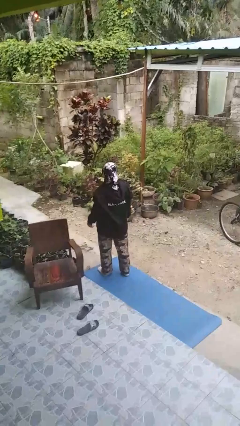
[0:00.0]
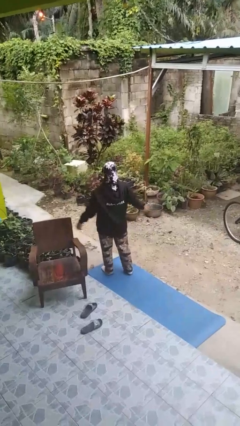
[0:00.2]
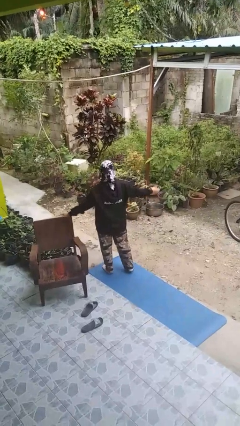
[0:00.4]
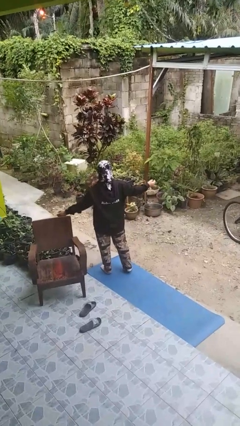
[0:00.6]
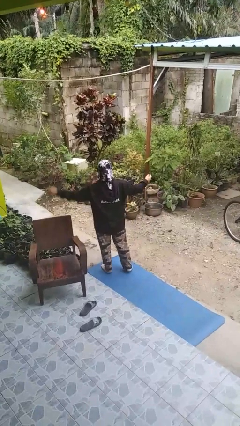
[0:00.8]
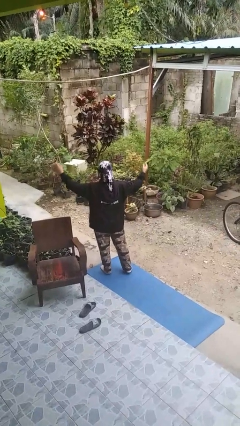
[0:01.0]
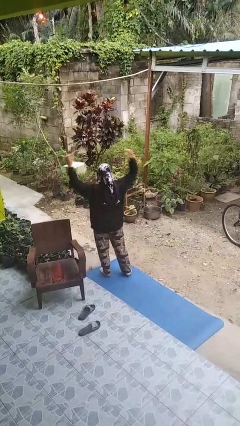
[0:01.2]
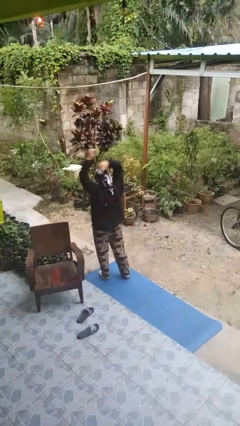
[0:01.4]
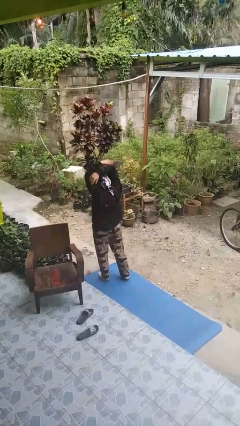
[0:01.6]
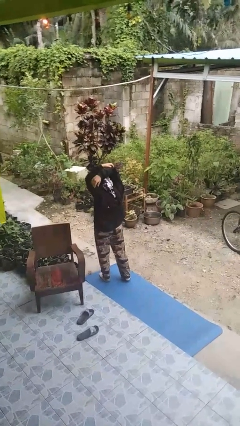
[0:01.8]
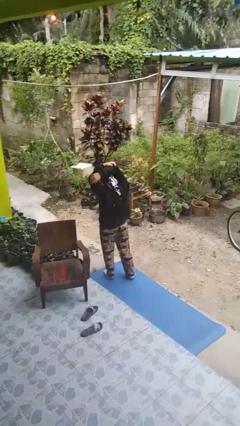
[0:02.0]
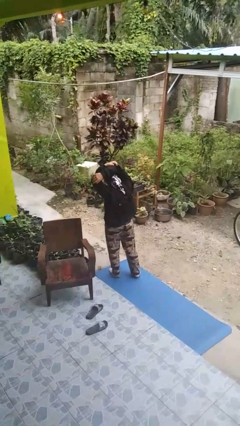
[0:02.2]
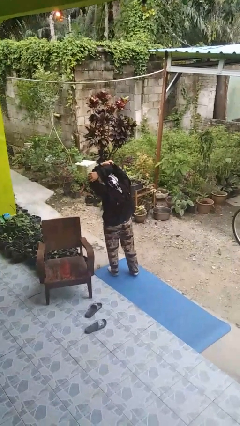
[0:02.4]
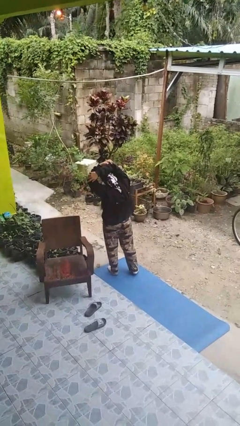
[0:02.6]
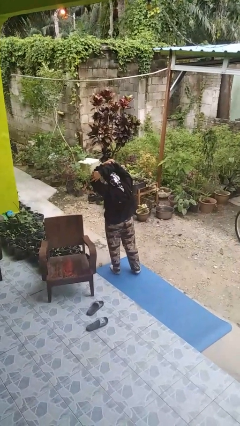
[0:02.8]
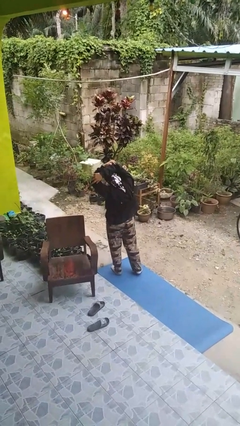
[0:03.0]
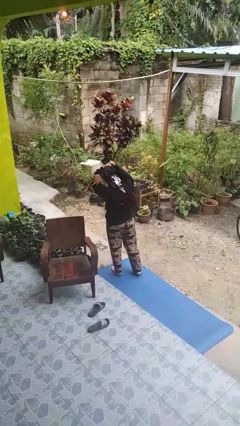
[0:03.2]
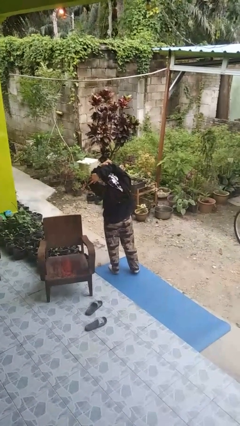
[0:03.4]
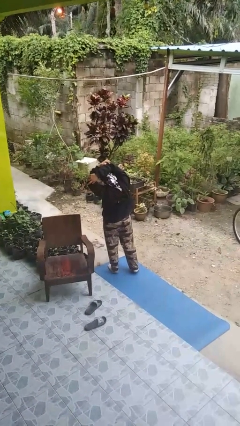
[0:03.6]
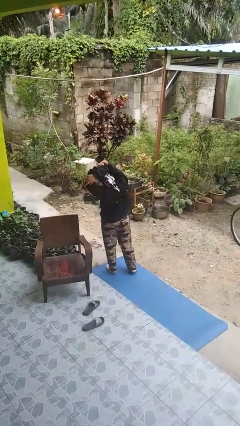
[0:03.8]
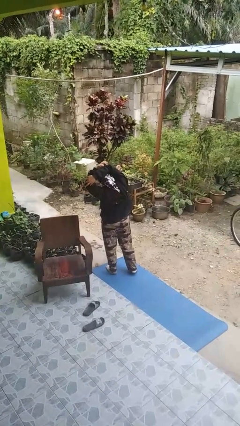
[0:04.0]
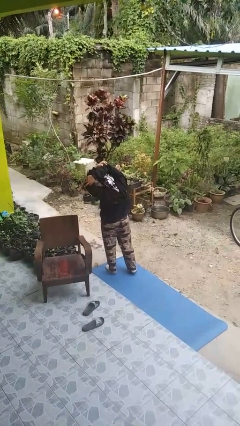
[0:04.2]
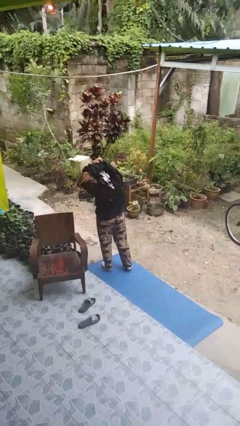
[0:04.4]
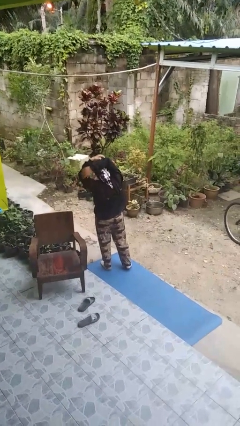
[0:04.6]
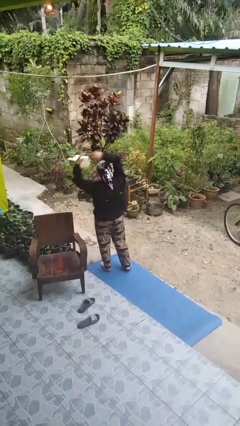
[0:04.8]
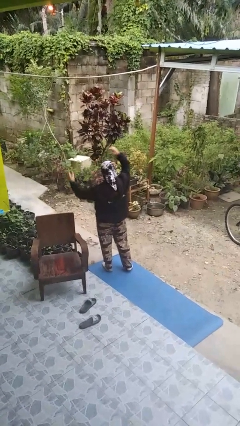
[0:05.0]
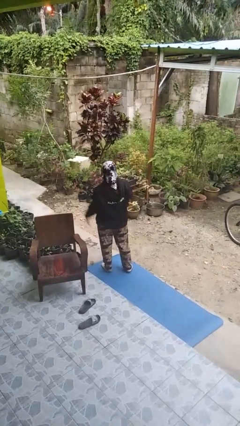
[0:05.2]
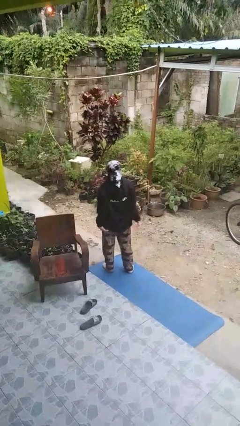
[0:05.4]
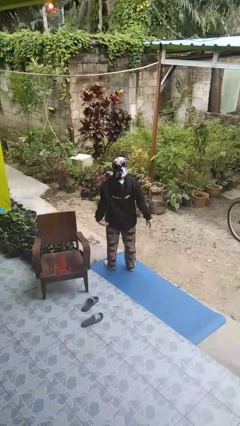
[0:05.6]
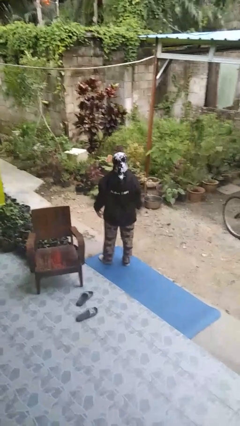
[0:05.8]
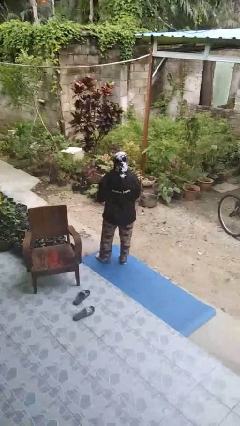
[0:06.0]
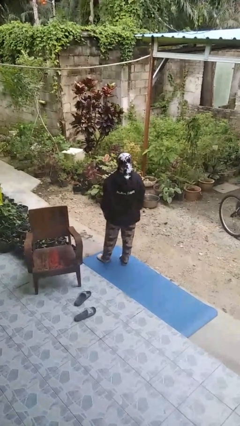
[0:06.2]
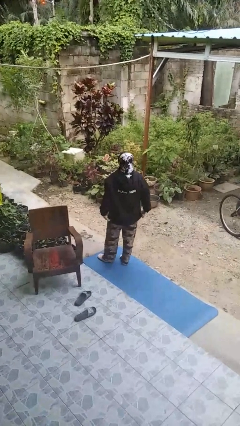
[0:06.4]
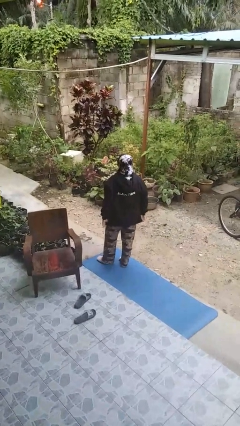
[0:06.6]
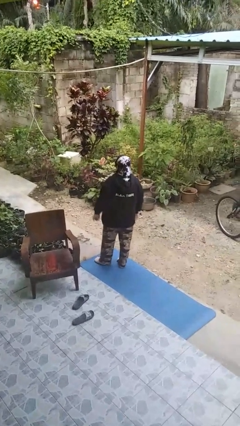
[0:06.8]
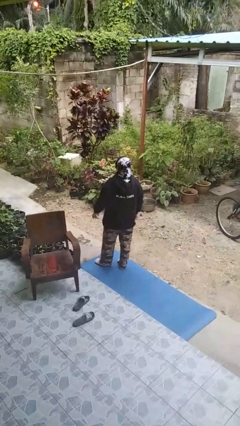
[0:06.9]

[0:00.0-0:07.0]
person stretches arms to side

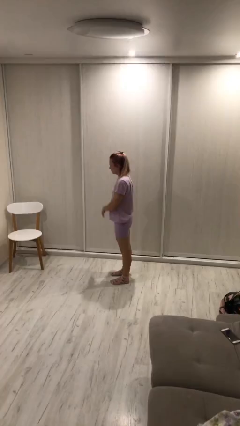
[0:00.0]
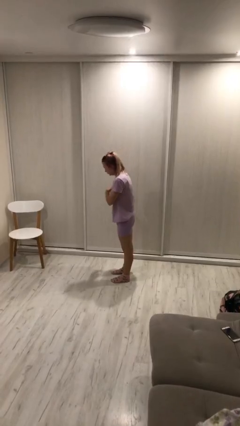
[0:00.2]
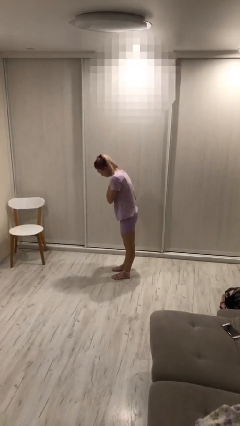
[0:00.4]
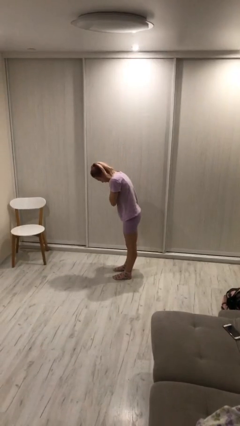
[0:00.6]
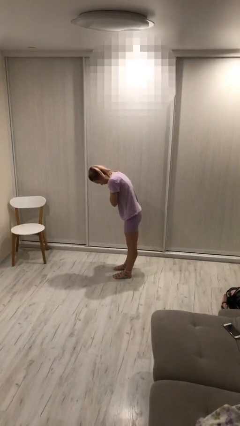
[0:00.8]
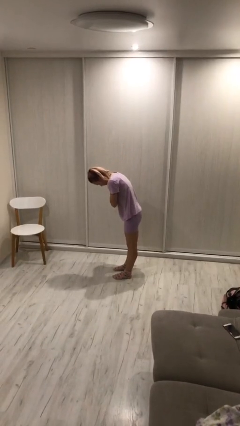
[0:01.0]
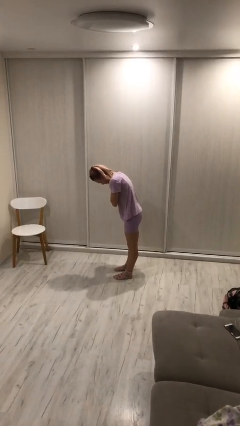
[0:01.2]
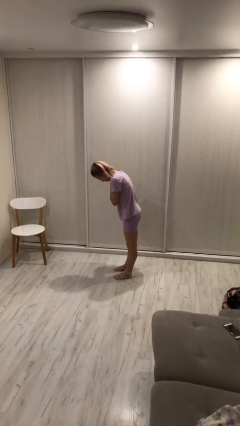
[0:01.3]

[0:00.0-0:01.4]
person bows

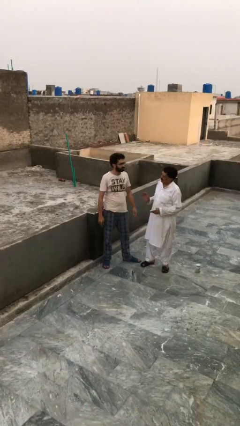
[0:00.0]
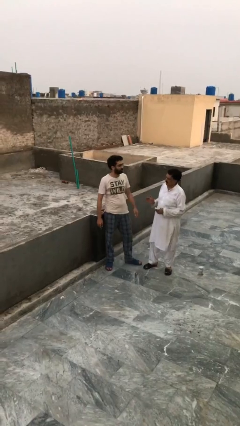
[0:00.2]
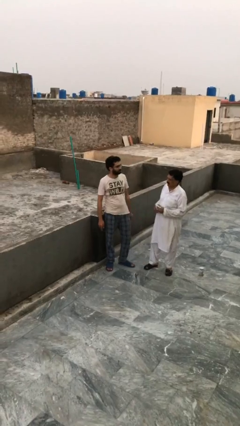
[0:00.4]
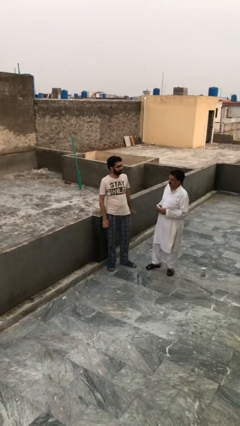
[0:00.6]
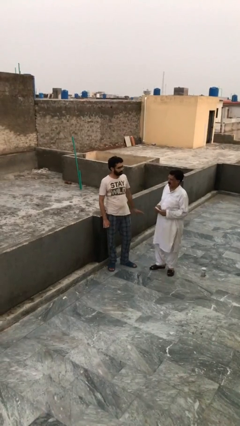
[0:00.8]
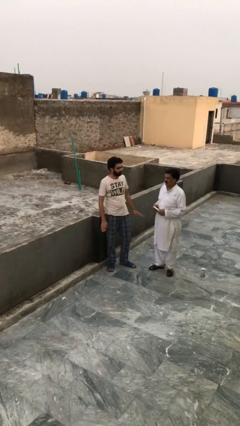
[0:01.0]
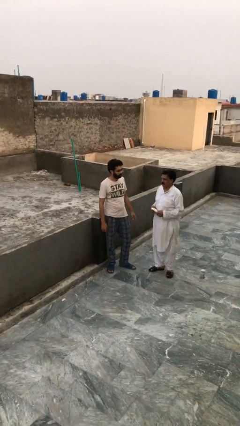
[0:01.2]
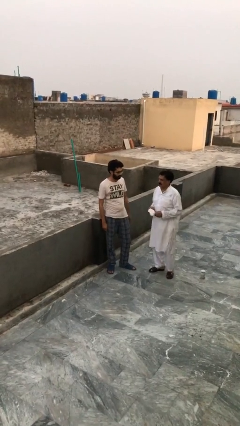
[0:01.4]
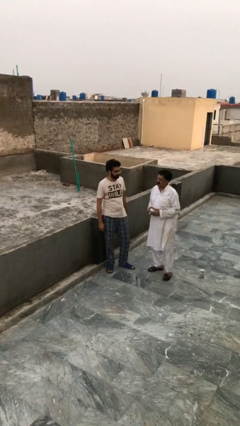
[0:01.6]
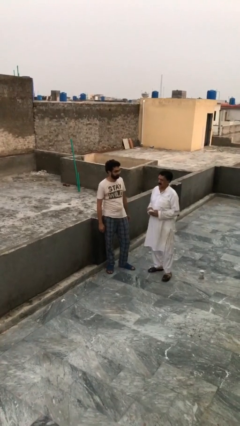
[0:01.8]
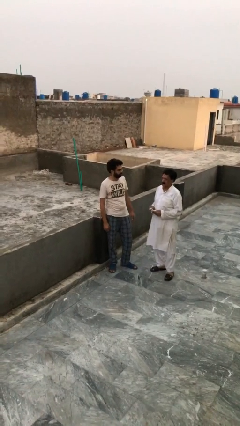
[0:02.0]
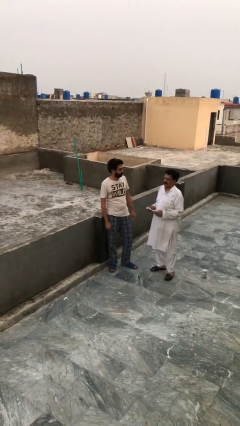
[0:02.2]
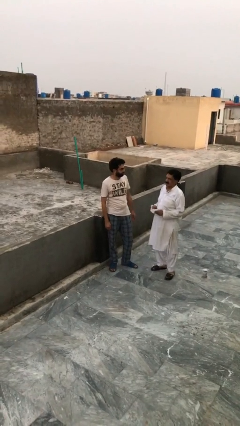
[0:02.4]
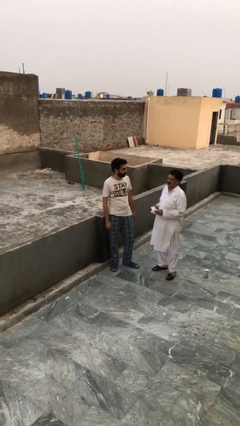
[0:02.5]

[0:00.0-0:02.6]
person talks to person

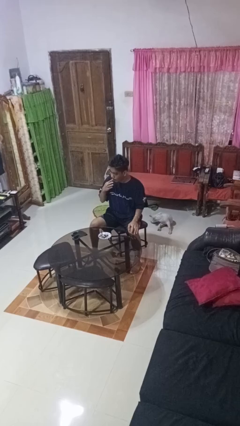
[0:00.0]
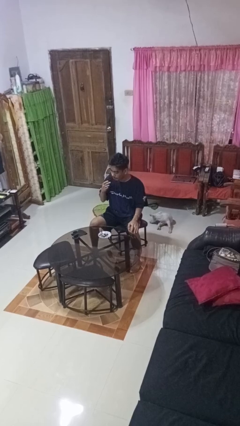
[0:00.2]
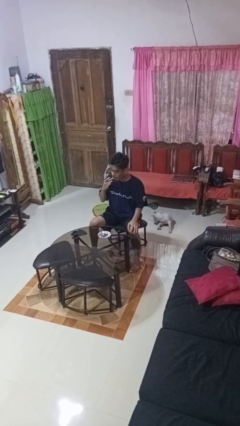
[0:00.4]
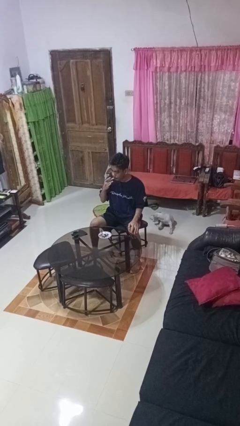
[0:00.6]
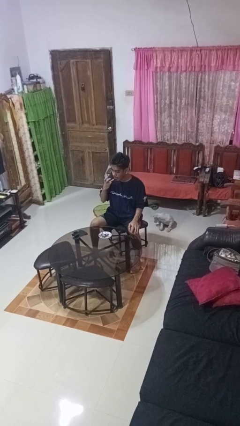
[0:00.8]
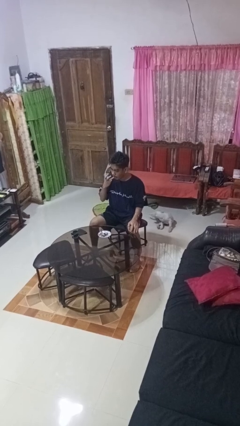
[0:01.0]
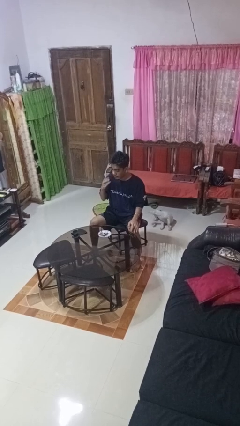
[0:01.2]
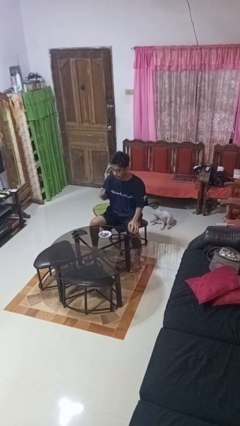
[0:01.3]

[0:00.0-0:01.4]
person licks fingers

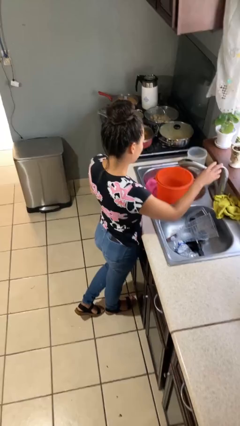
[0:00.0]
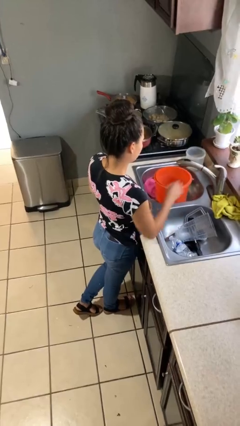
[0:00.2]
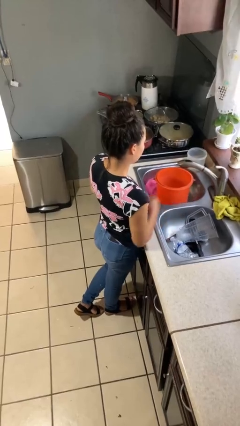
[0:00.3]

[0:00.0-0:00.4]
person turns off faucet

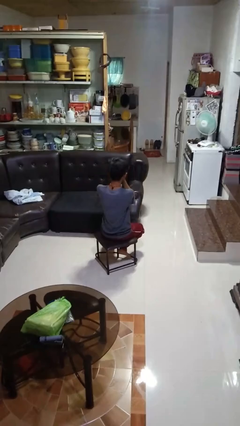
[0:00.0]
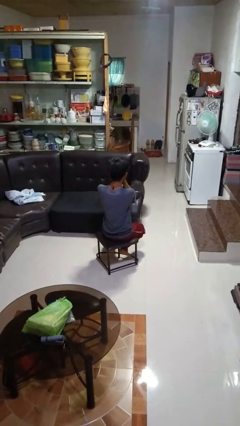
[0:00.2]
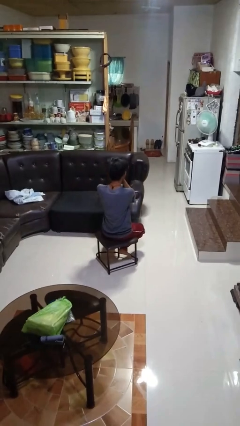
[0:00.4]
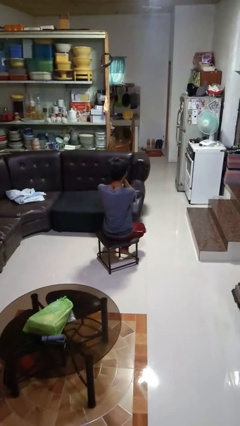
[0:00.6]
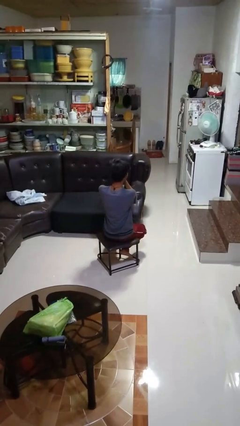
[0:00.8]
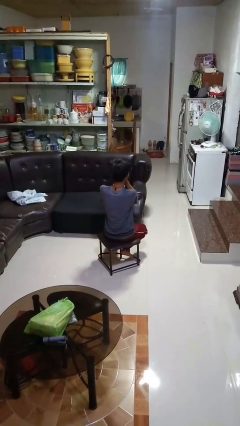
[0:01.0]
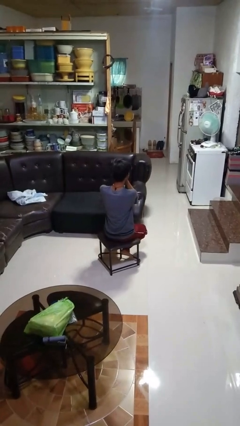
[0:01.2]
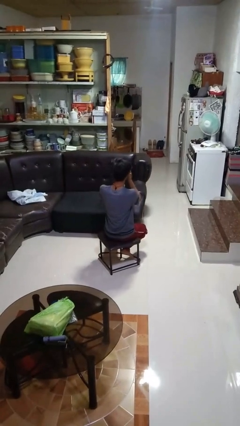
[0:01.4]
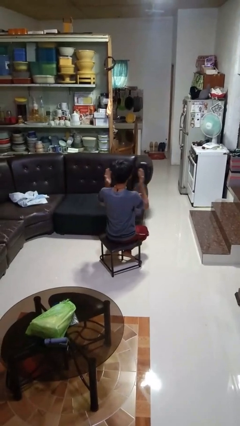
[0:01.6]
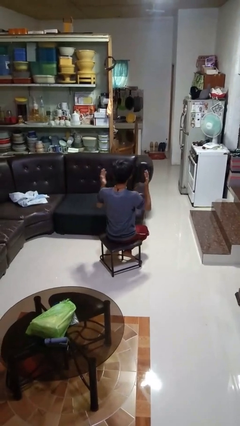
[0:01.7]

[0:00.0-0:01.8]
person covers face with hands

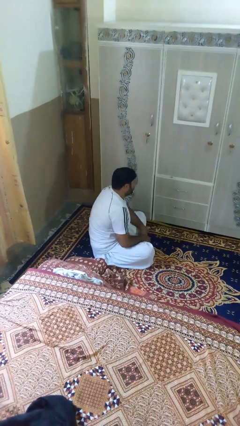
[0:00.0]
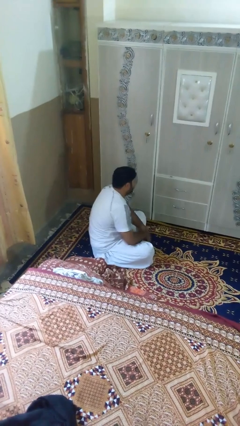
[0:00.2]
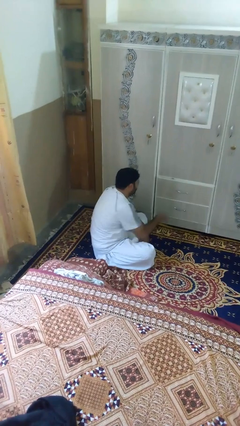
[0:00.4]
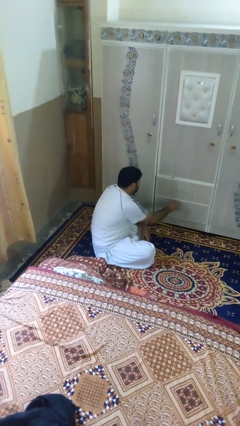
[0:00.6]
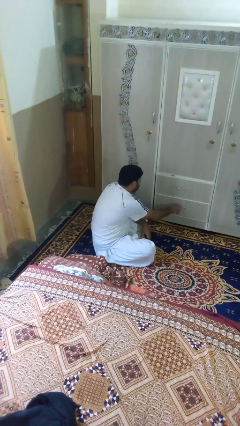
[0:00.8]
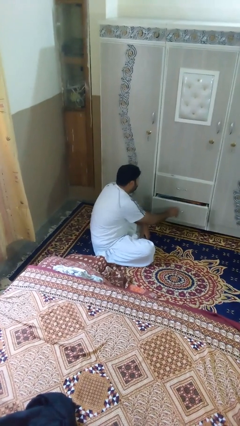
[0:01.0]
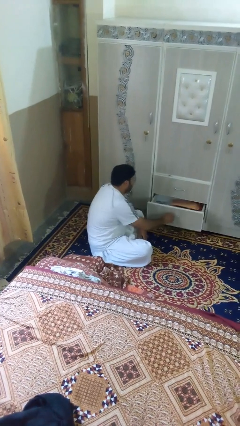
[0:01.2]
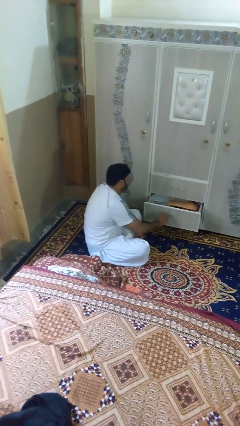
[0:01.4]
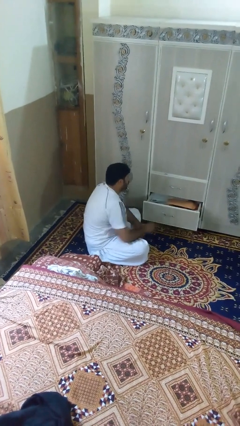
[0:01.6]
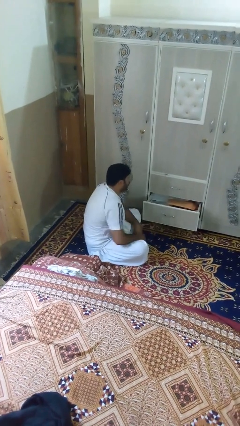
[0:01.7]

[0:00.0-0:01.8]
person opens dresser drawer

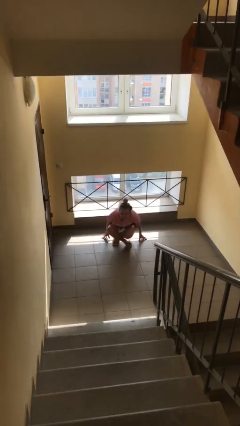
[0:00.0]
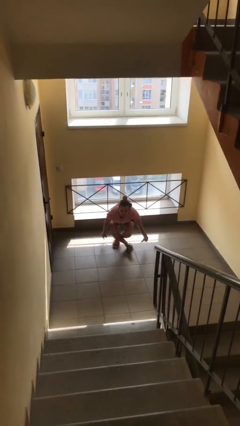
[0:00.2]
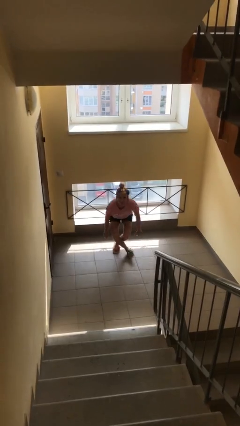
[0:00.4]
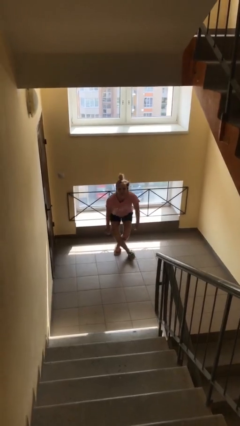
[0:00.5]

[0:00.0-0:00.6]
person stands up from floor

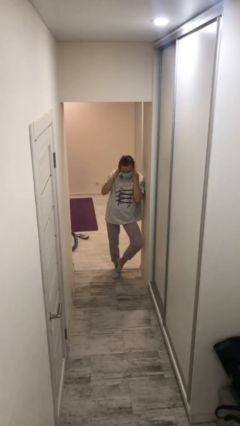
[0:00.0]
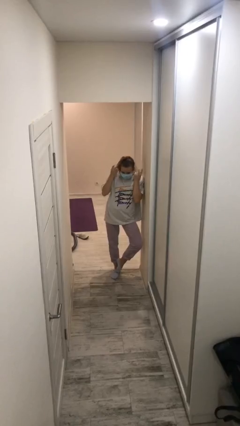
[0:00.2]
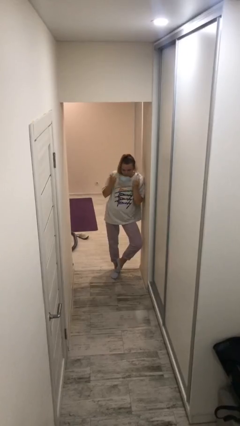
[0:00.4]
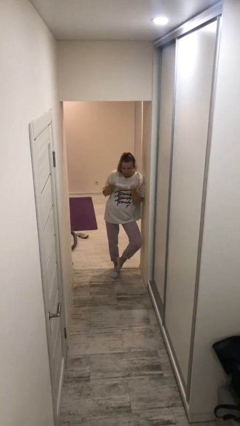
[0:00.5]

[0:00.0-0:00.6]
person takes off facemask
